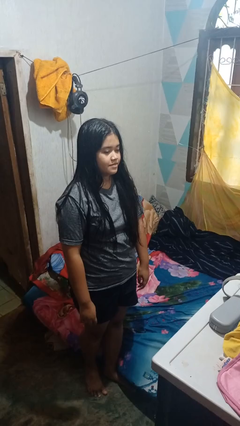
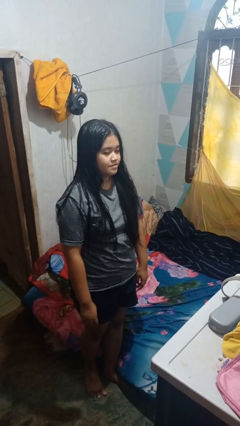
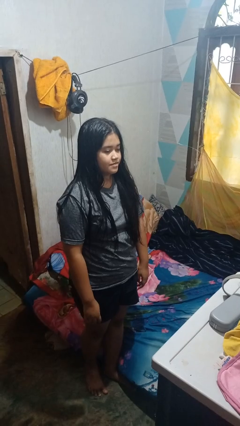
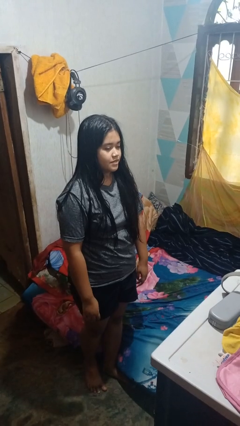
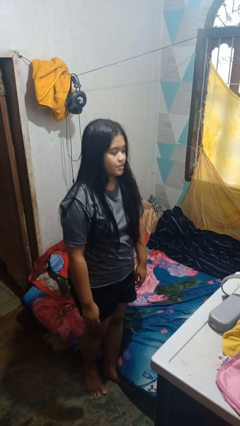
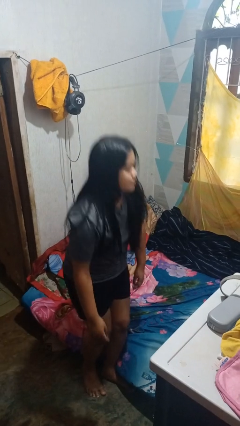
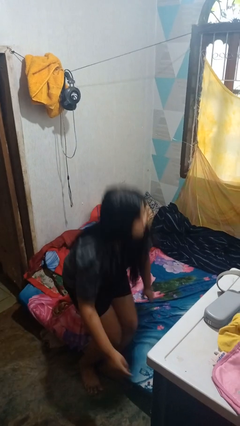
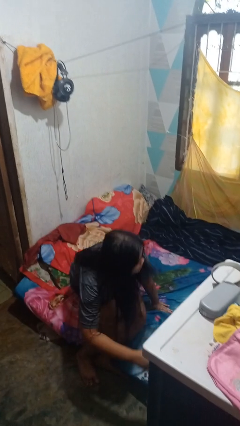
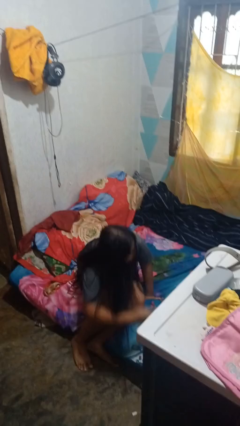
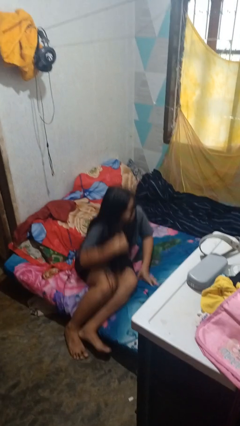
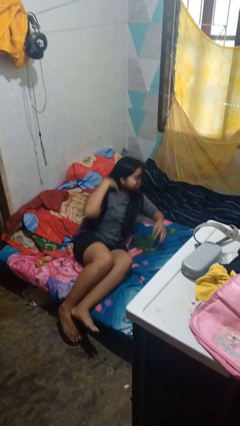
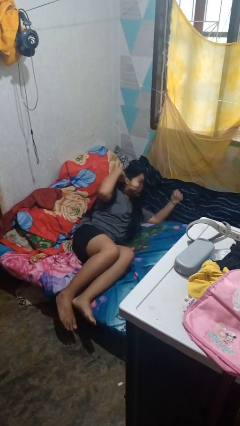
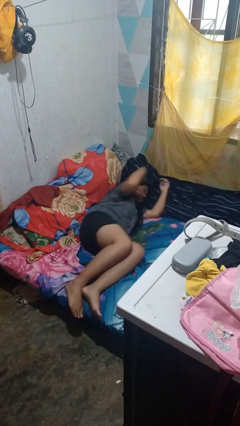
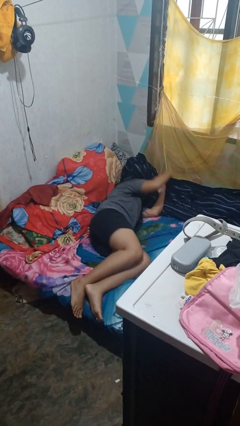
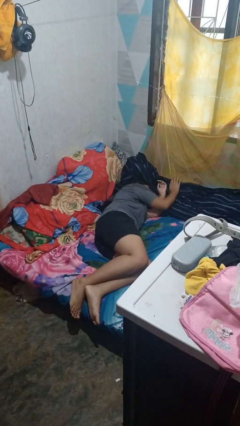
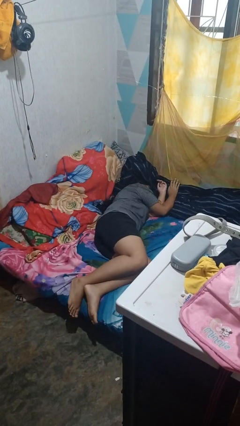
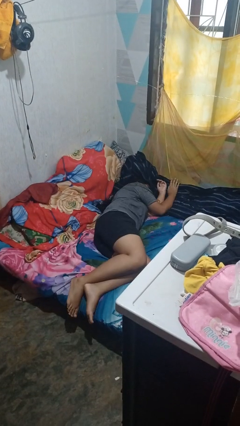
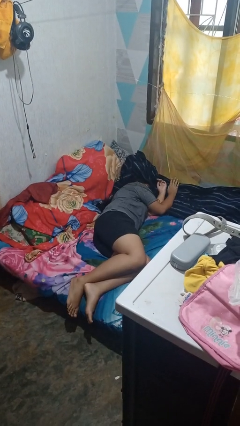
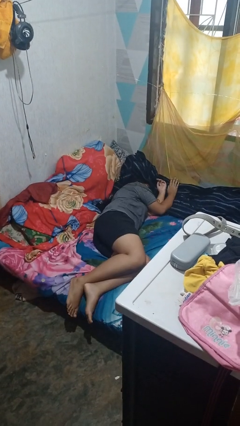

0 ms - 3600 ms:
person lies down on bed

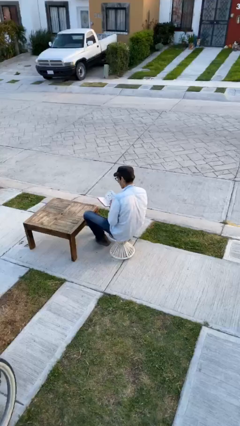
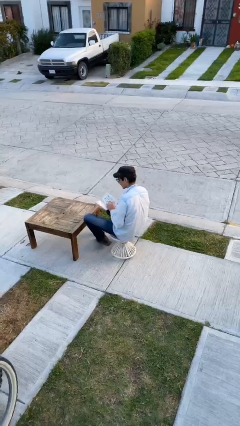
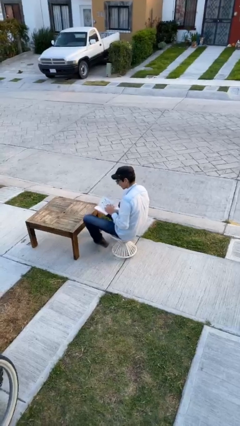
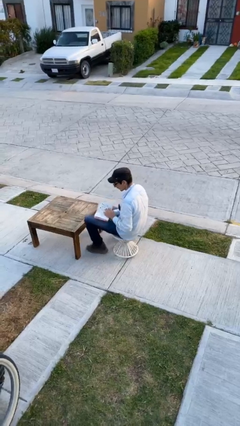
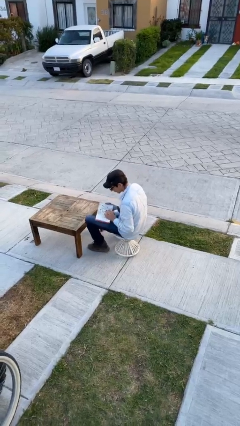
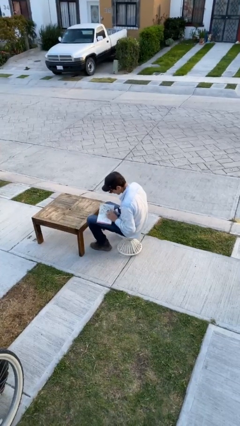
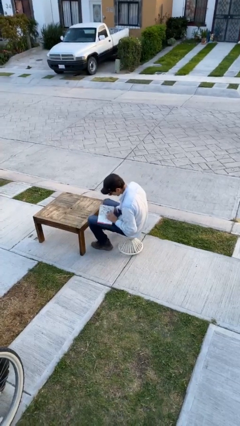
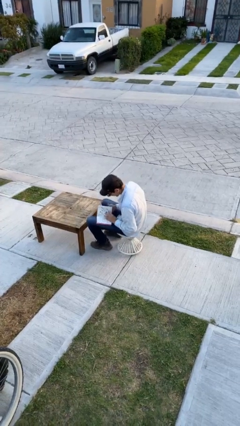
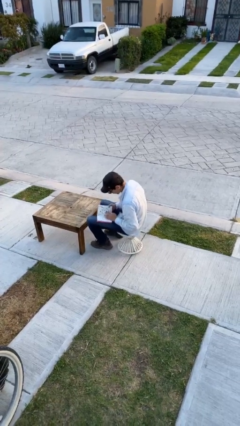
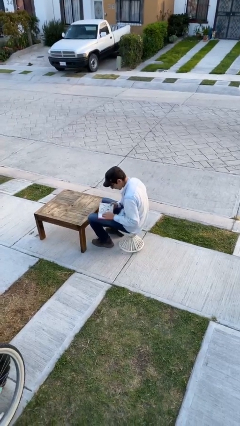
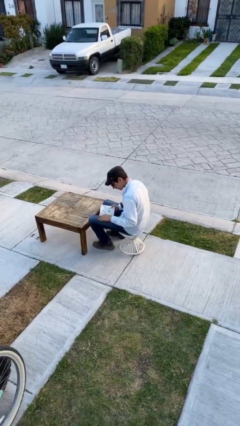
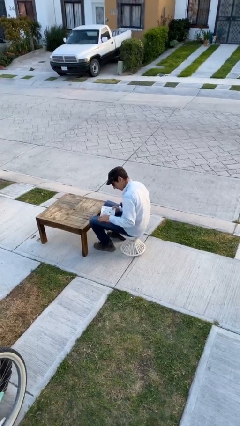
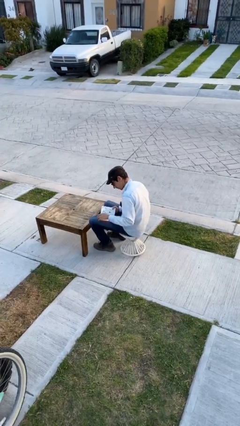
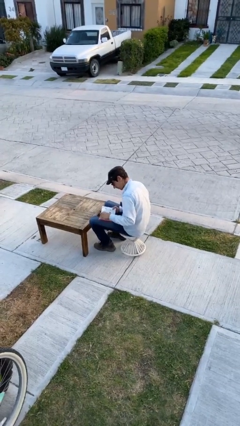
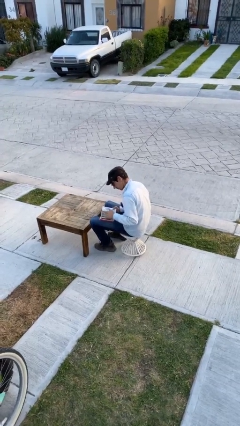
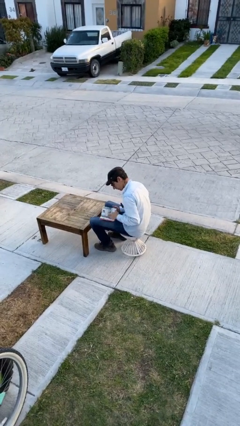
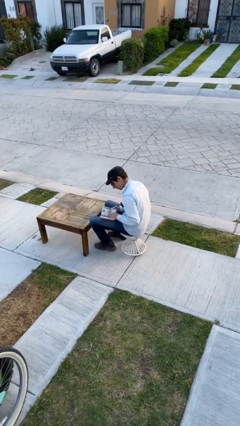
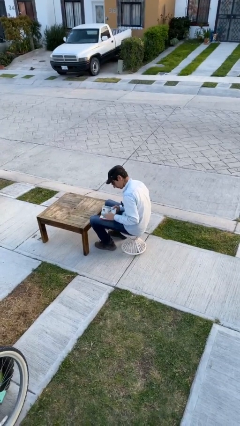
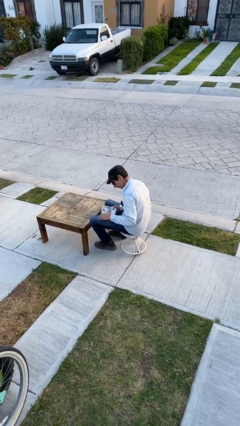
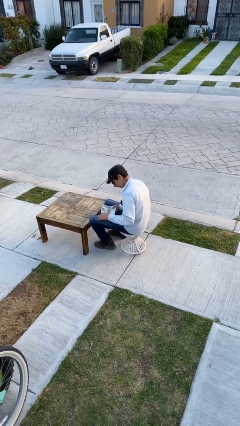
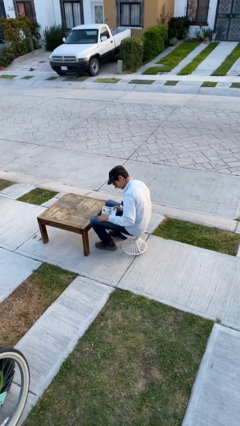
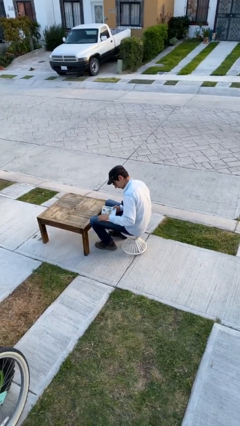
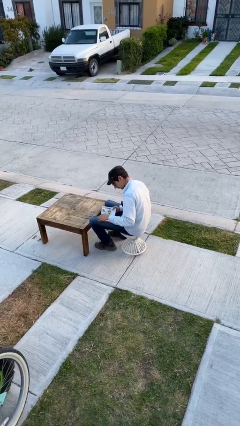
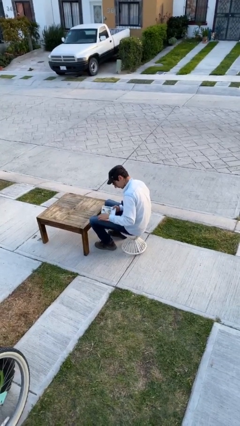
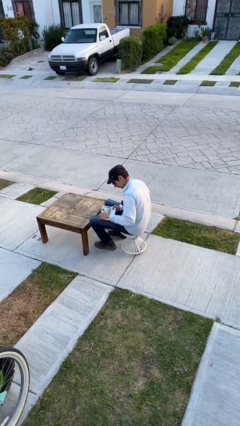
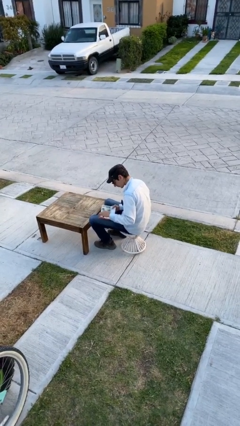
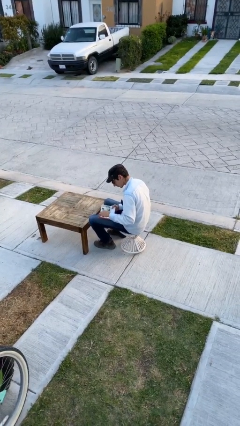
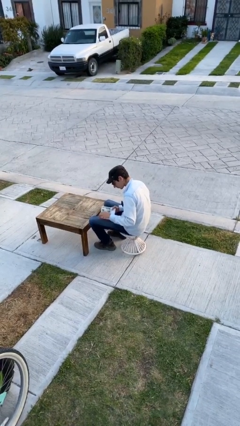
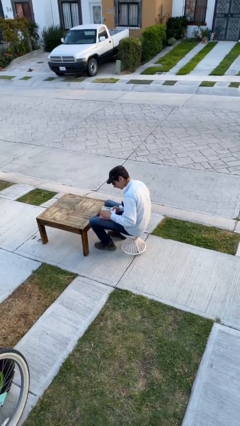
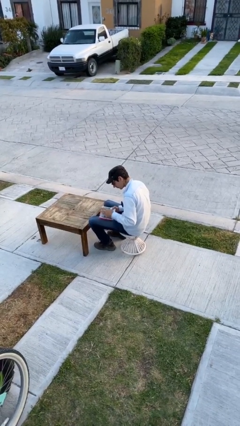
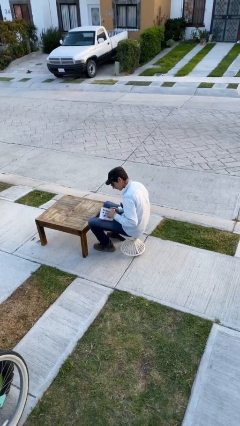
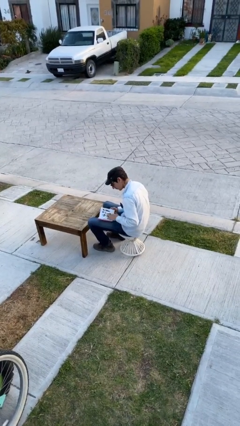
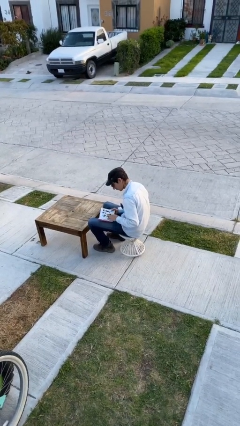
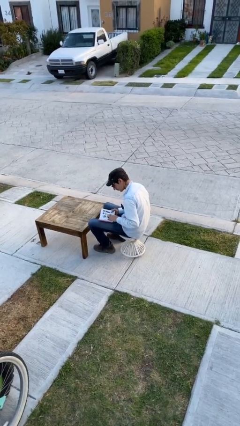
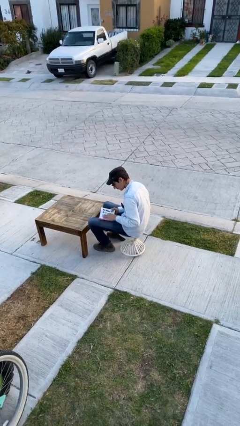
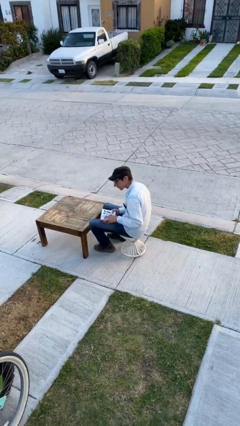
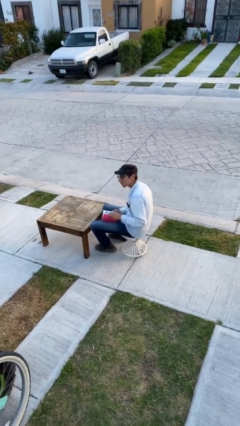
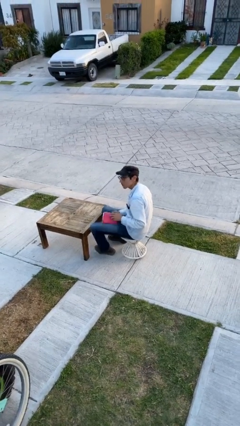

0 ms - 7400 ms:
person reads document

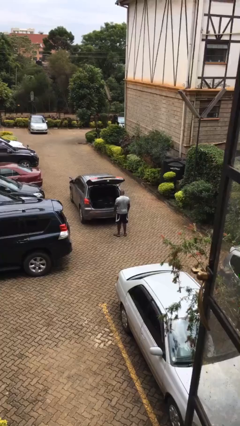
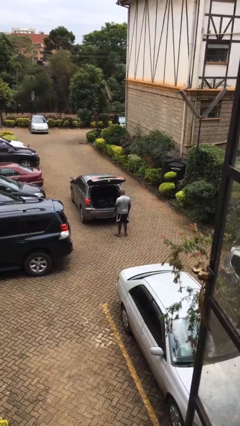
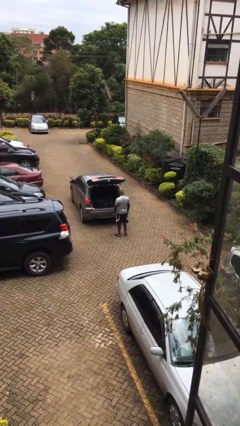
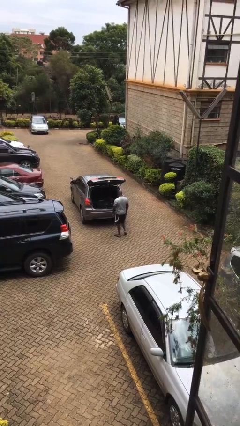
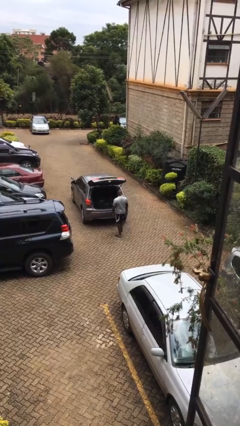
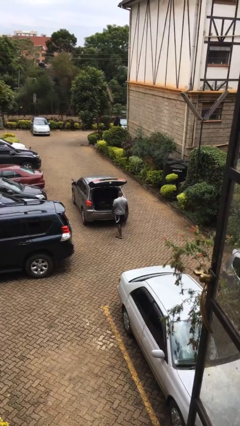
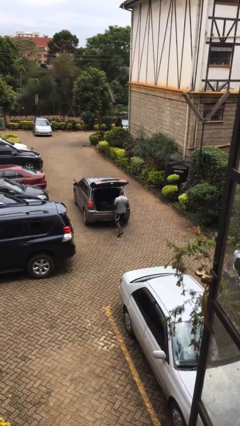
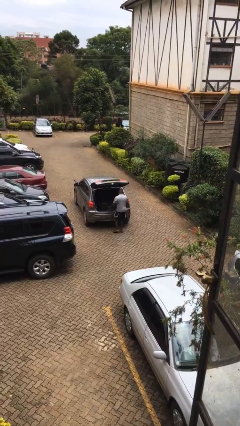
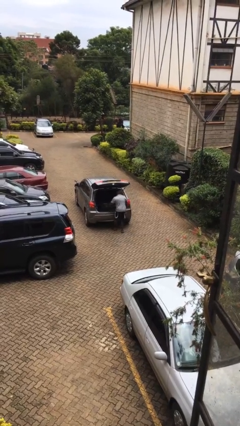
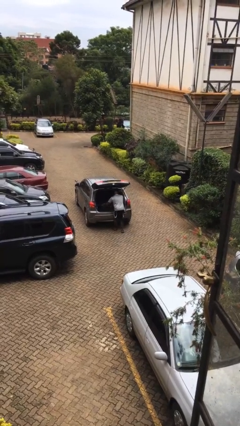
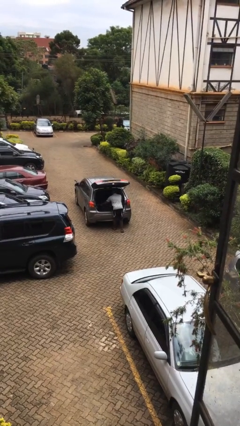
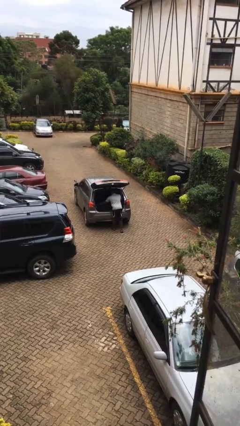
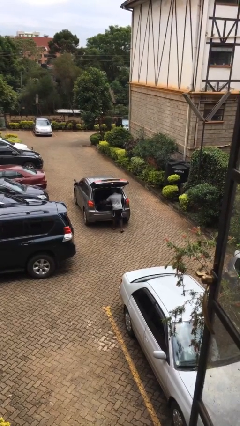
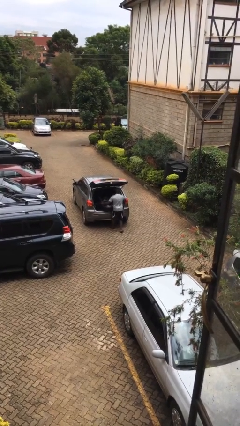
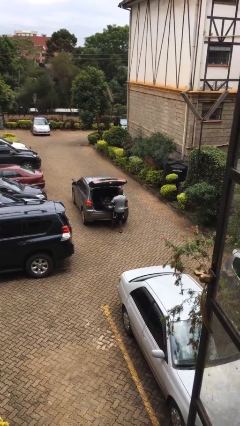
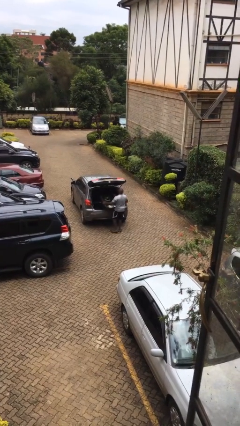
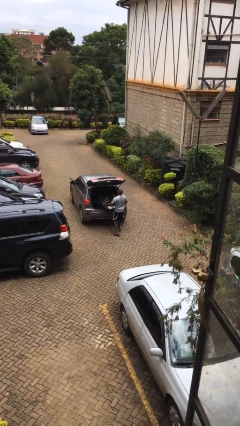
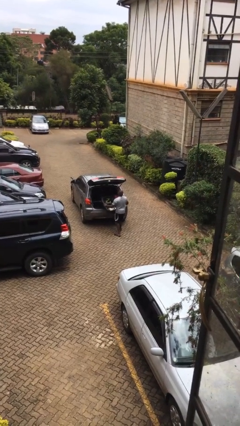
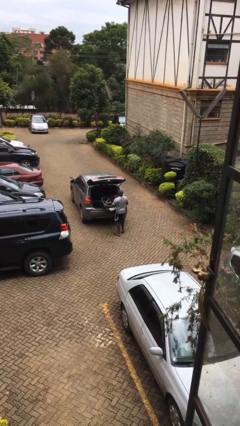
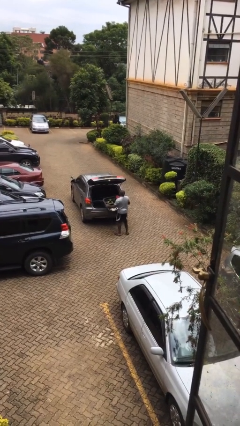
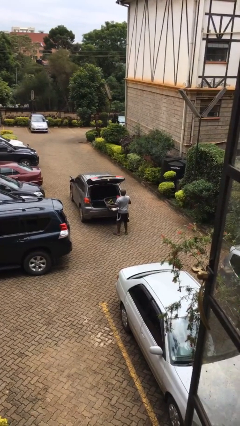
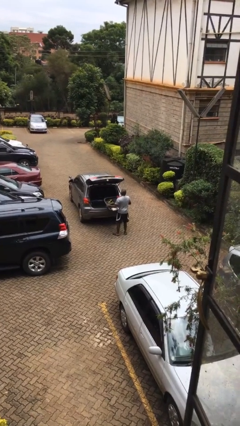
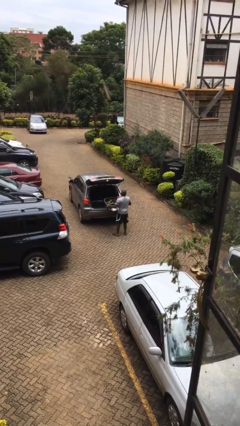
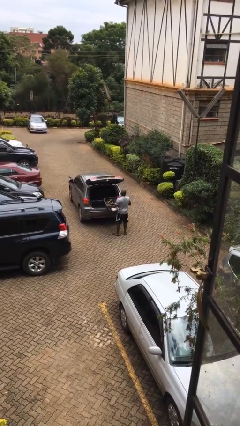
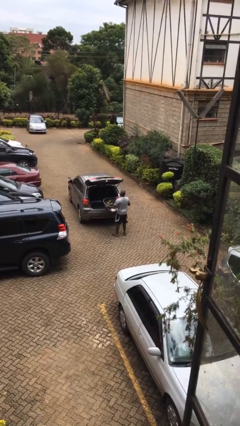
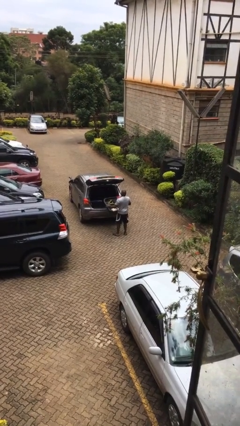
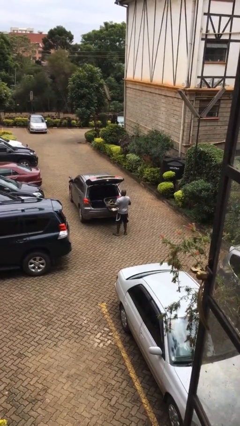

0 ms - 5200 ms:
person unloads car

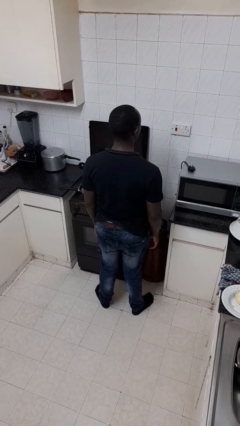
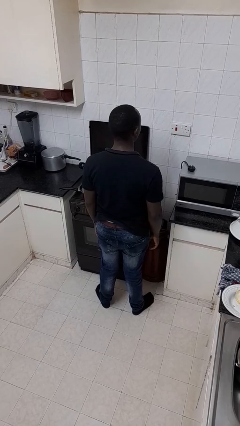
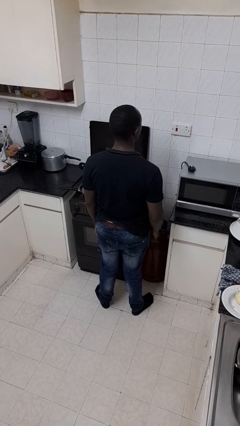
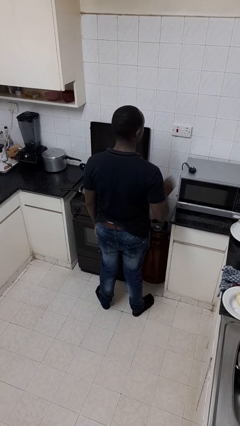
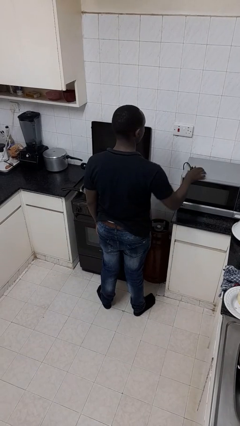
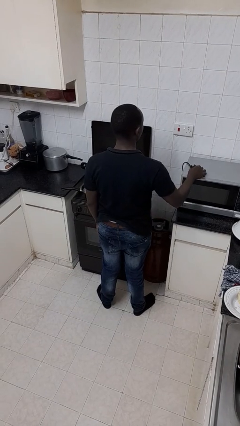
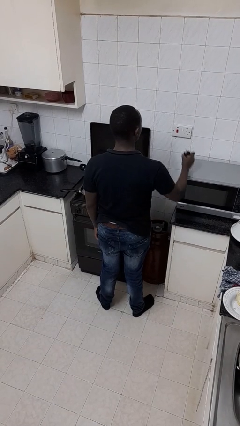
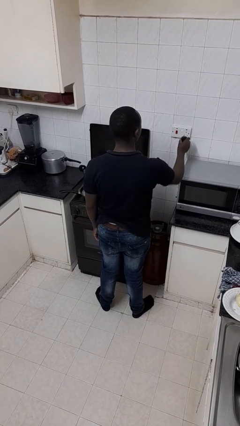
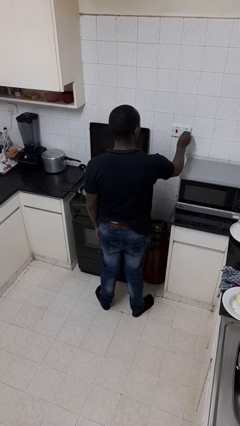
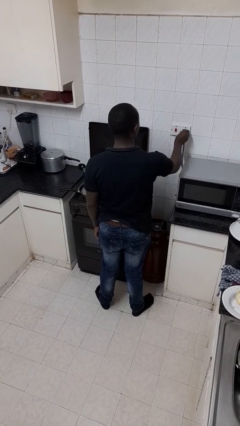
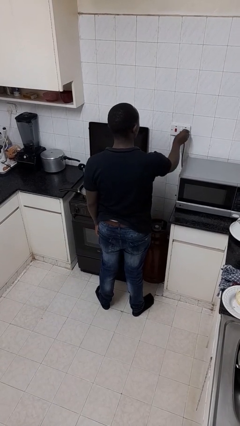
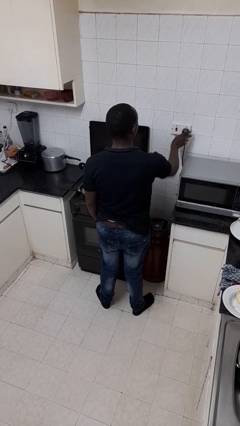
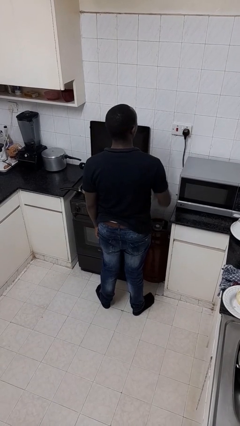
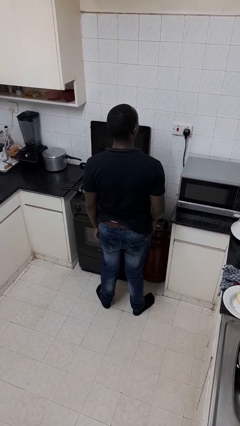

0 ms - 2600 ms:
person plugs into electrical socket
